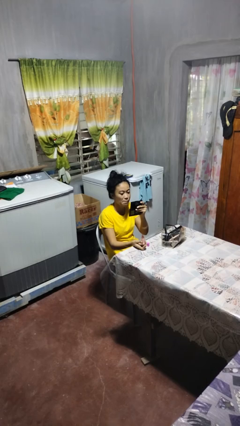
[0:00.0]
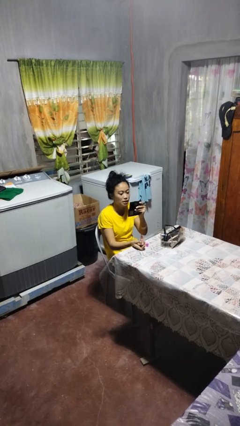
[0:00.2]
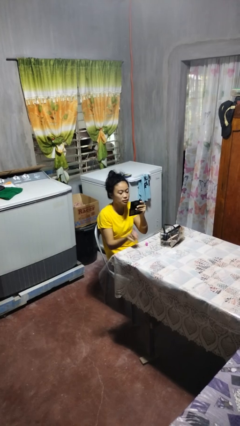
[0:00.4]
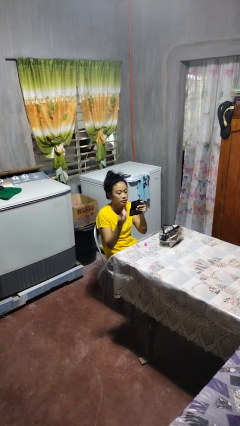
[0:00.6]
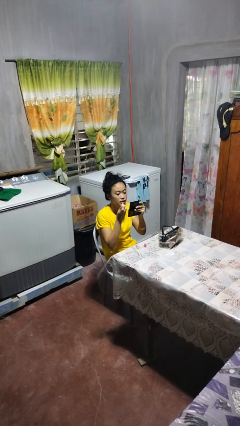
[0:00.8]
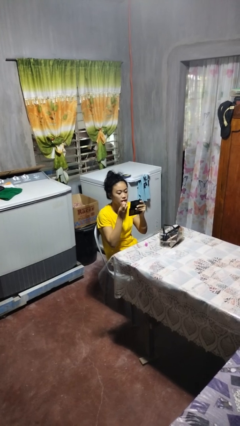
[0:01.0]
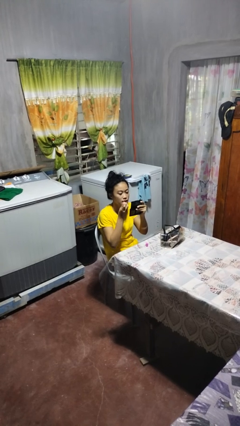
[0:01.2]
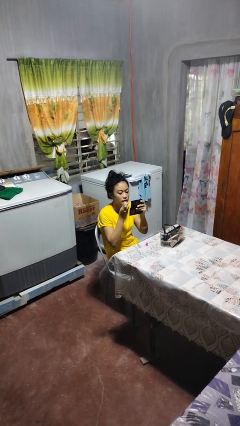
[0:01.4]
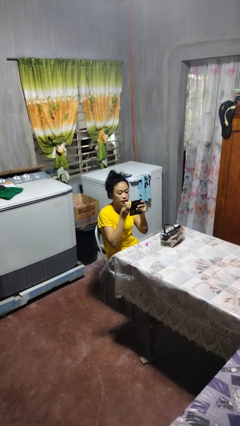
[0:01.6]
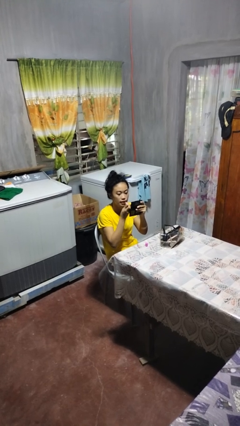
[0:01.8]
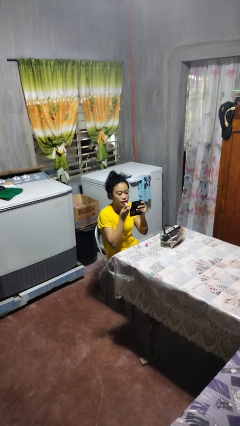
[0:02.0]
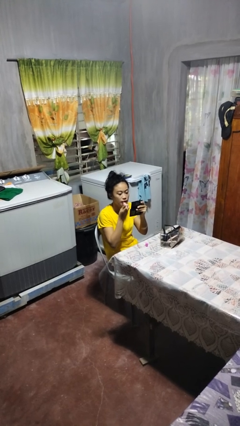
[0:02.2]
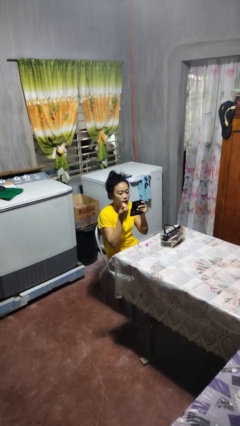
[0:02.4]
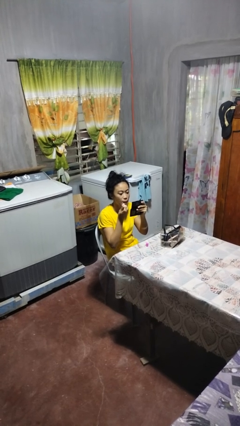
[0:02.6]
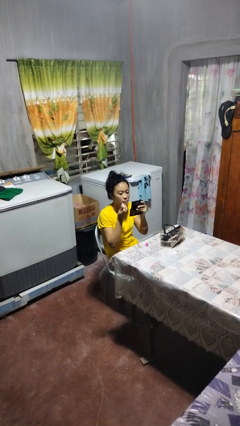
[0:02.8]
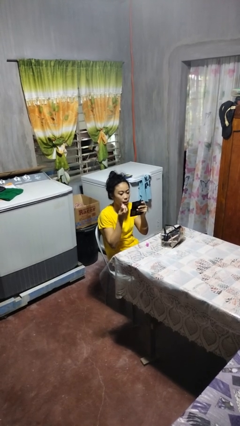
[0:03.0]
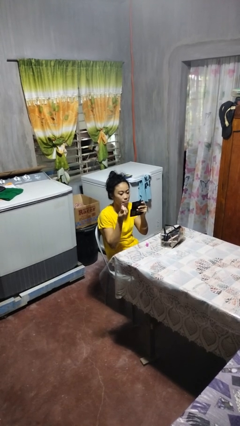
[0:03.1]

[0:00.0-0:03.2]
person applies lip makeup

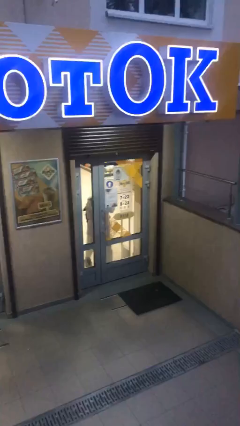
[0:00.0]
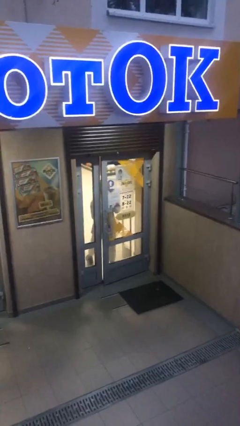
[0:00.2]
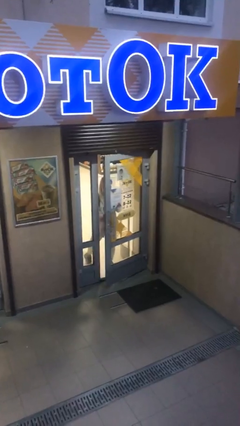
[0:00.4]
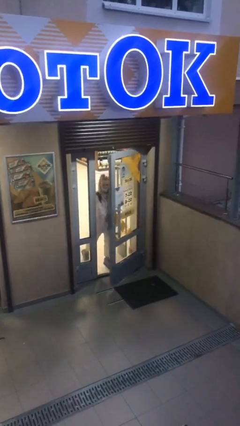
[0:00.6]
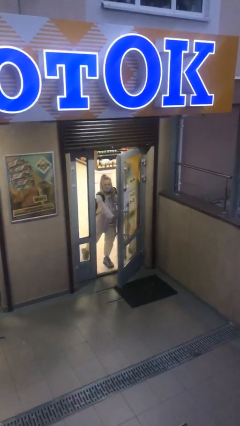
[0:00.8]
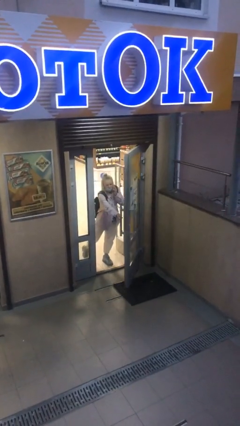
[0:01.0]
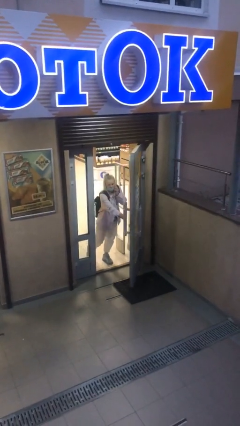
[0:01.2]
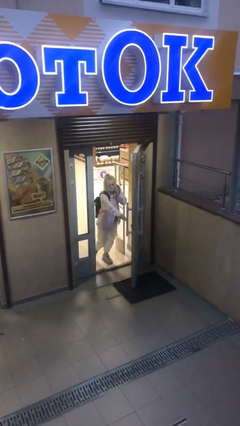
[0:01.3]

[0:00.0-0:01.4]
person opens facility door

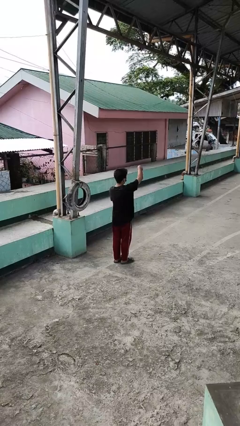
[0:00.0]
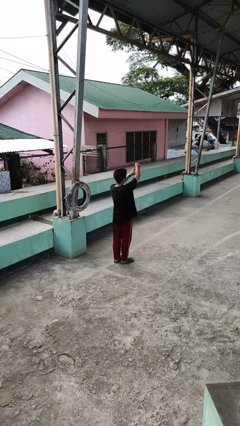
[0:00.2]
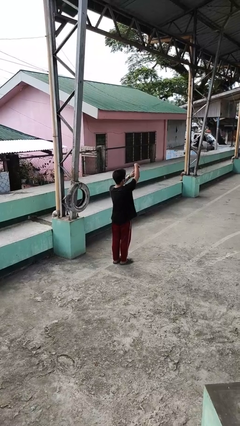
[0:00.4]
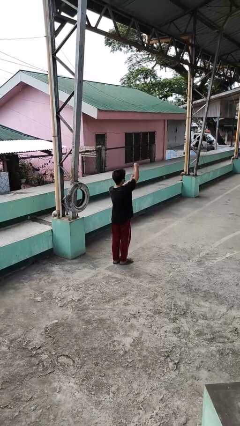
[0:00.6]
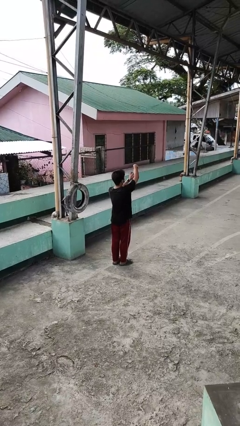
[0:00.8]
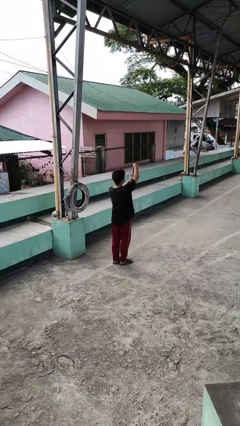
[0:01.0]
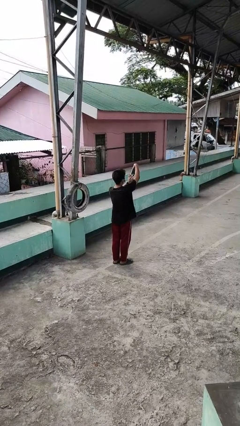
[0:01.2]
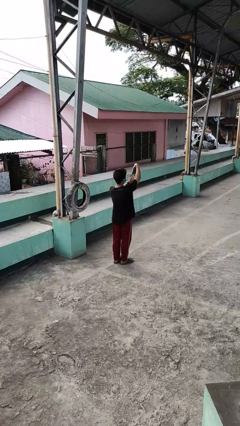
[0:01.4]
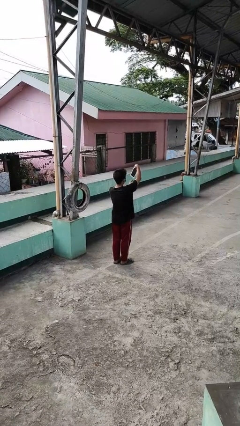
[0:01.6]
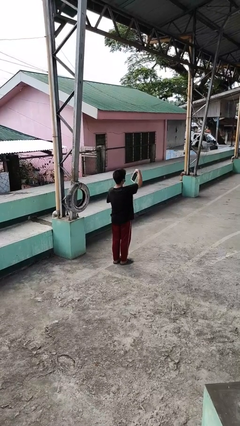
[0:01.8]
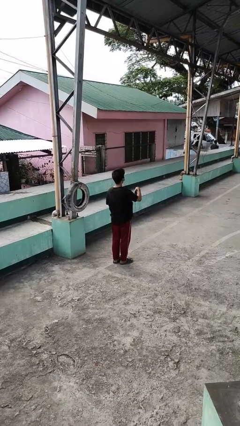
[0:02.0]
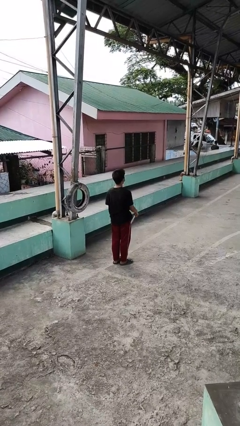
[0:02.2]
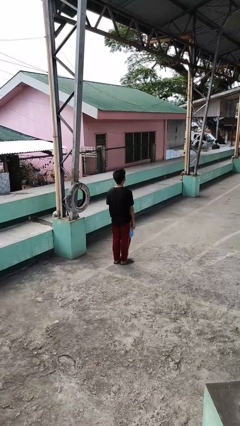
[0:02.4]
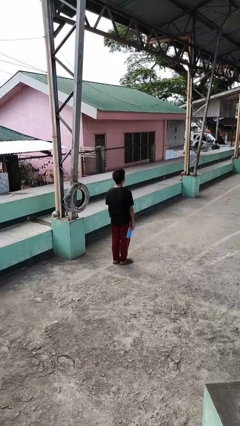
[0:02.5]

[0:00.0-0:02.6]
person interacts with tablet

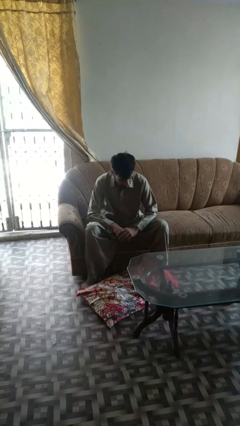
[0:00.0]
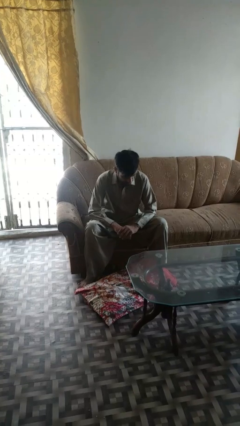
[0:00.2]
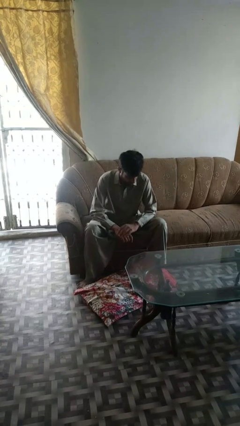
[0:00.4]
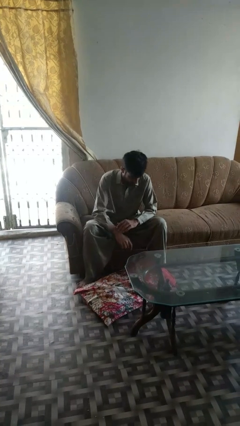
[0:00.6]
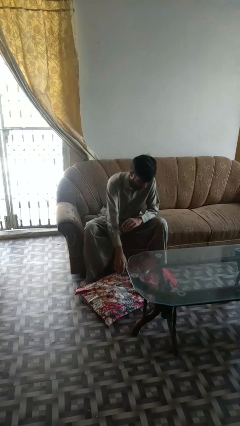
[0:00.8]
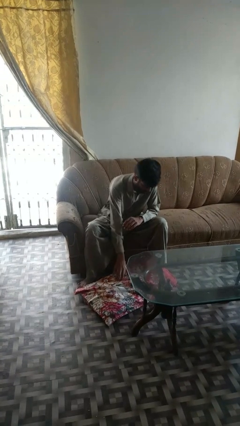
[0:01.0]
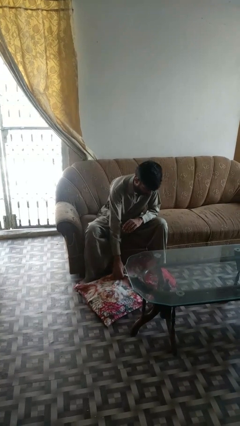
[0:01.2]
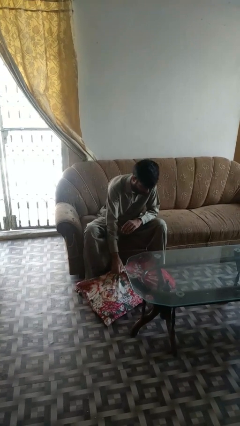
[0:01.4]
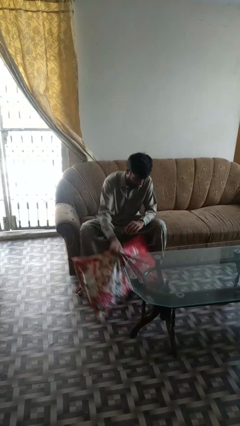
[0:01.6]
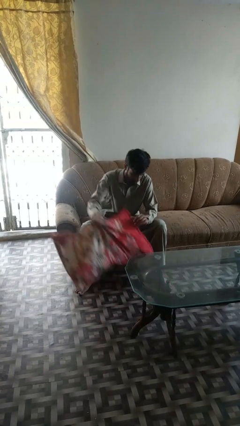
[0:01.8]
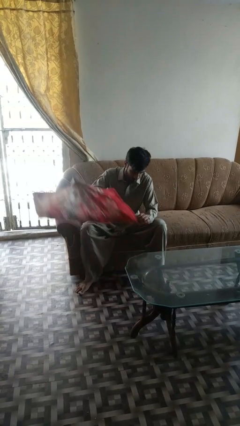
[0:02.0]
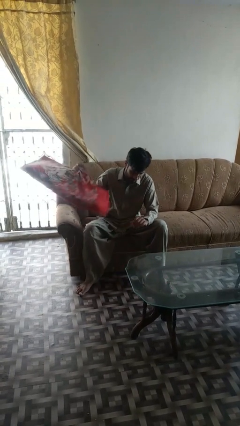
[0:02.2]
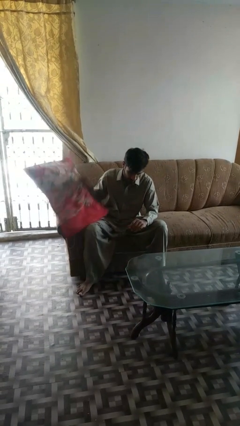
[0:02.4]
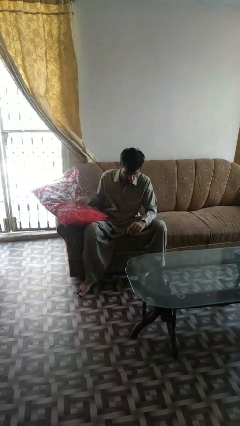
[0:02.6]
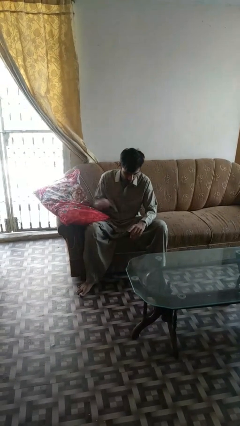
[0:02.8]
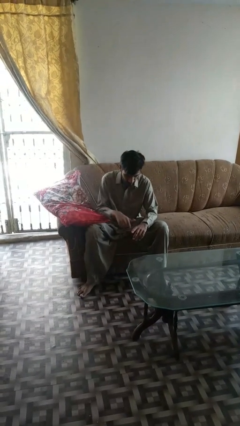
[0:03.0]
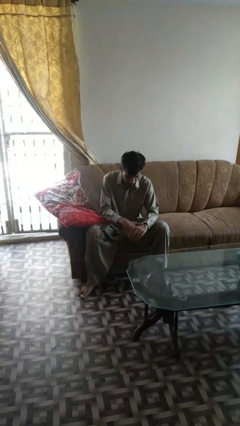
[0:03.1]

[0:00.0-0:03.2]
person picks up object from floor

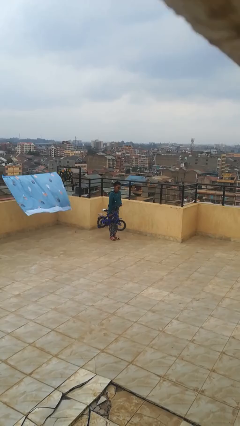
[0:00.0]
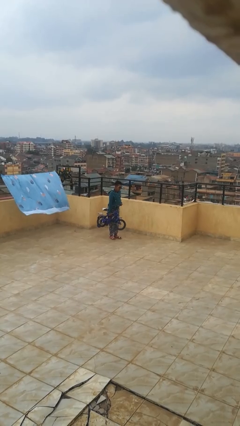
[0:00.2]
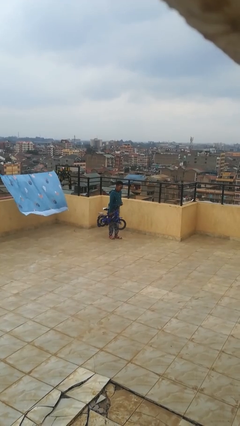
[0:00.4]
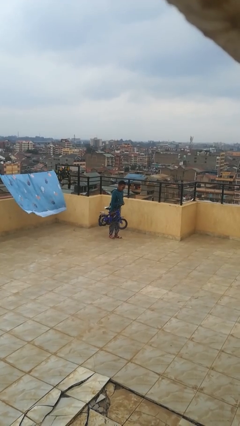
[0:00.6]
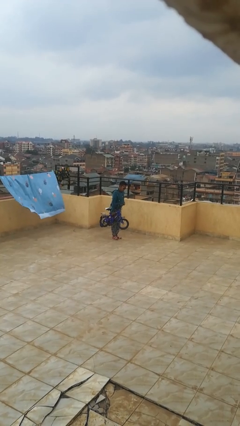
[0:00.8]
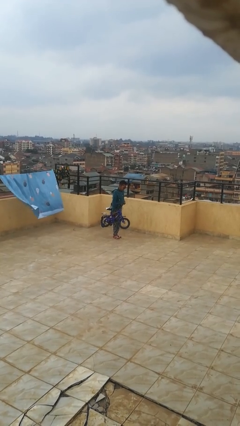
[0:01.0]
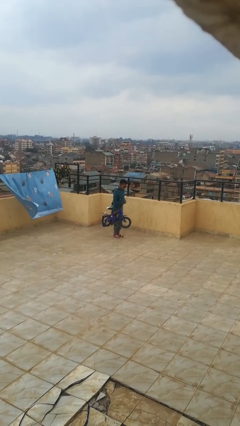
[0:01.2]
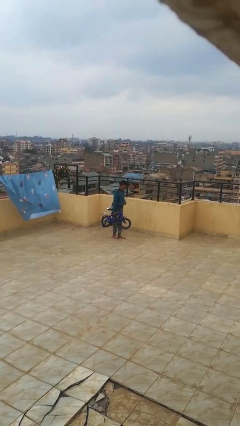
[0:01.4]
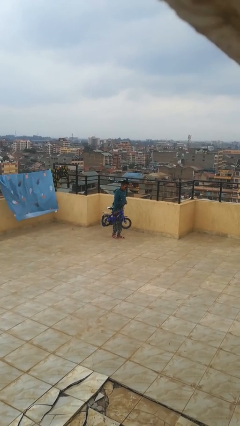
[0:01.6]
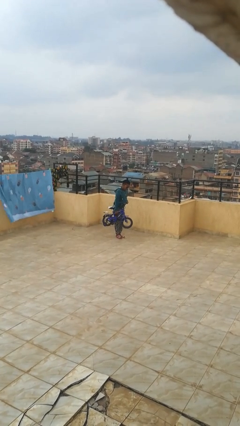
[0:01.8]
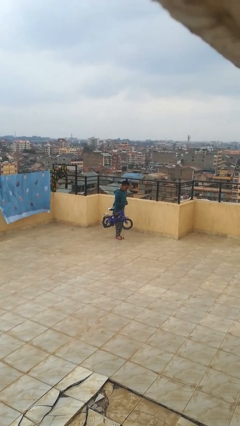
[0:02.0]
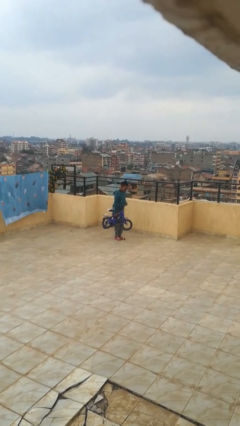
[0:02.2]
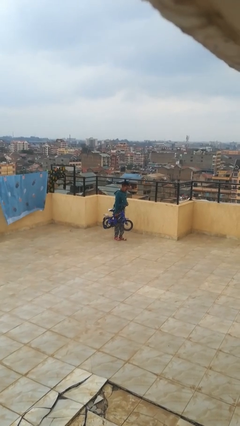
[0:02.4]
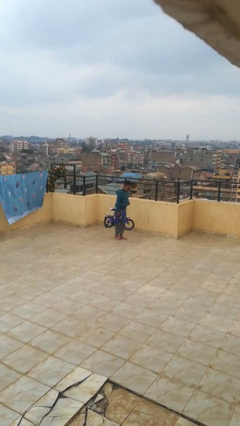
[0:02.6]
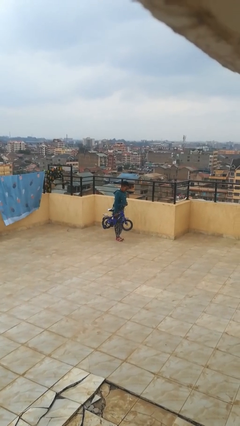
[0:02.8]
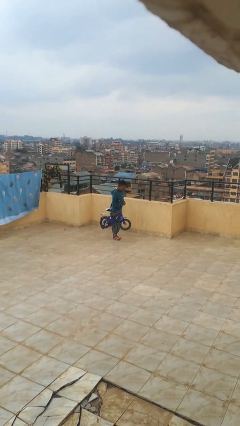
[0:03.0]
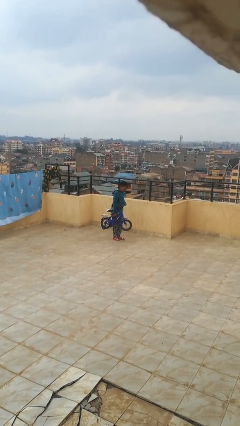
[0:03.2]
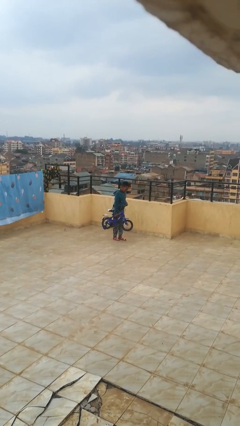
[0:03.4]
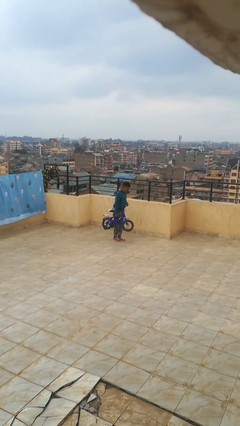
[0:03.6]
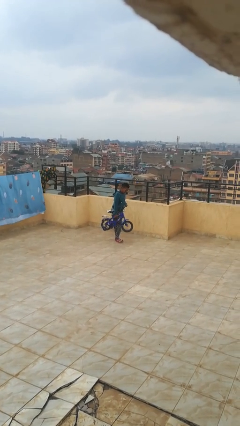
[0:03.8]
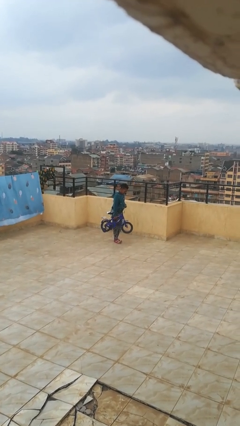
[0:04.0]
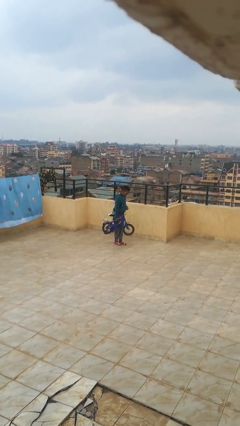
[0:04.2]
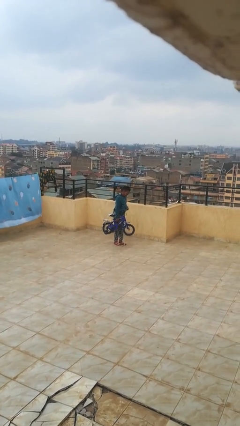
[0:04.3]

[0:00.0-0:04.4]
person carries bicycle

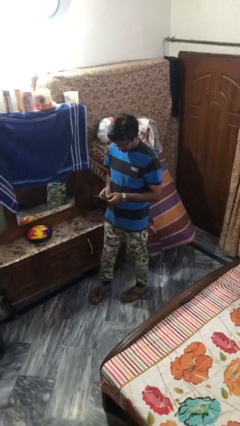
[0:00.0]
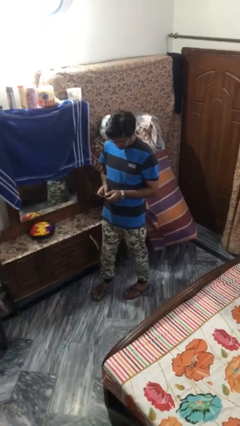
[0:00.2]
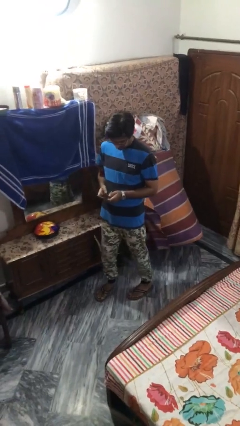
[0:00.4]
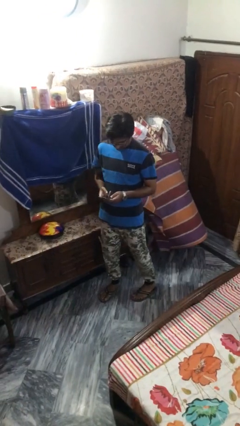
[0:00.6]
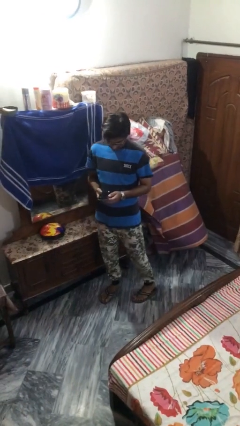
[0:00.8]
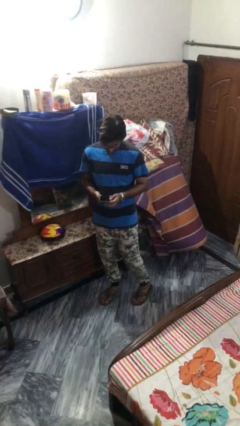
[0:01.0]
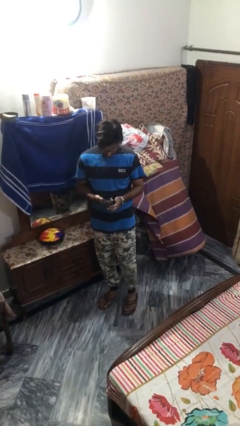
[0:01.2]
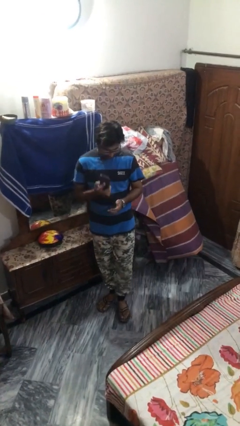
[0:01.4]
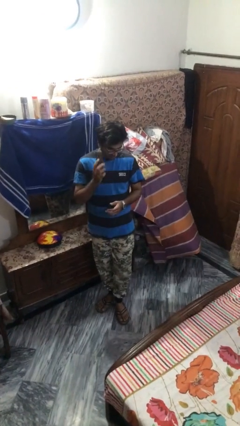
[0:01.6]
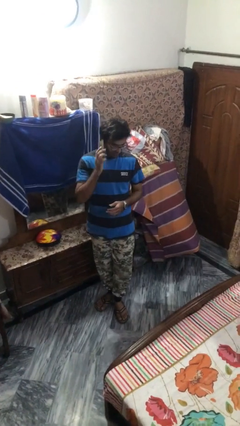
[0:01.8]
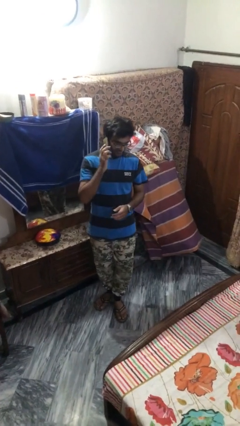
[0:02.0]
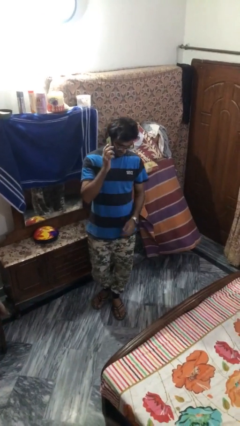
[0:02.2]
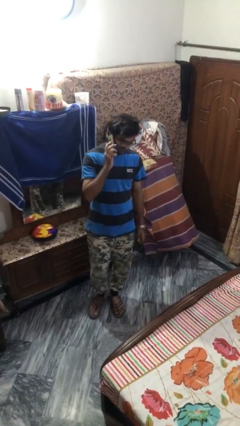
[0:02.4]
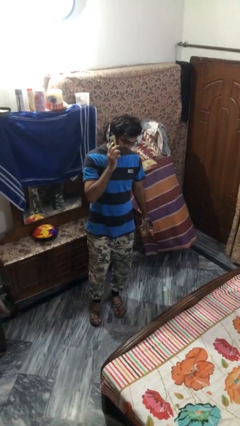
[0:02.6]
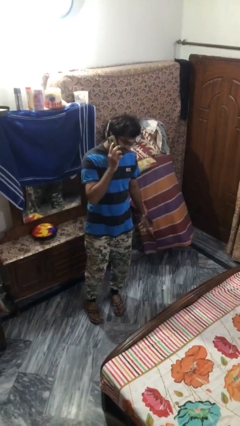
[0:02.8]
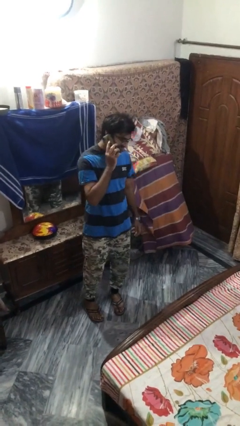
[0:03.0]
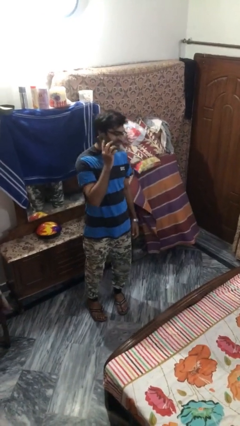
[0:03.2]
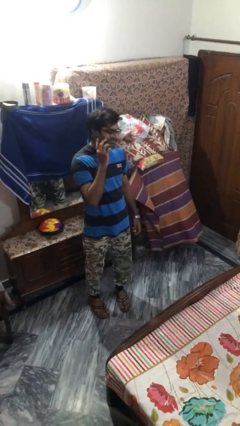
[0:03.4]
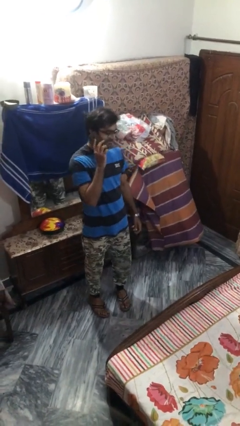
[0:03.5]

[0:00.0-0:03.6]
person talks on phone
